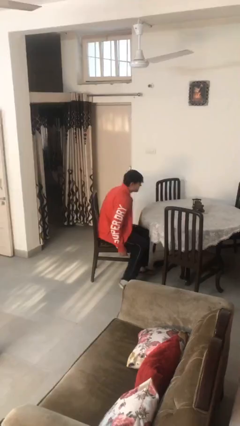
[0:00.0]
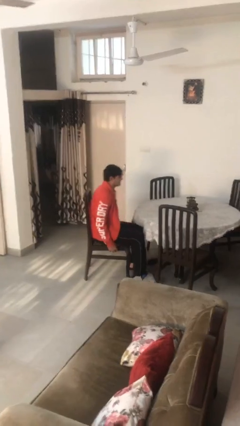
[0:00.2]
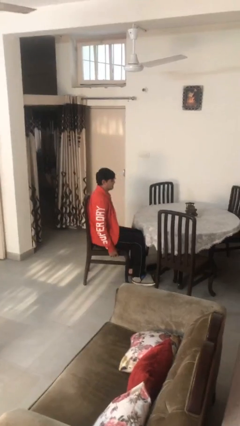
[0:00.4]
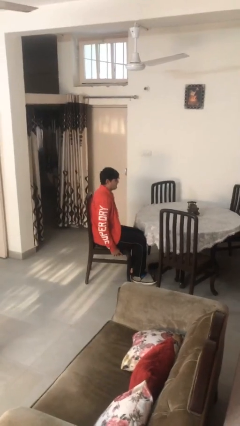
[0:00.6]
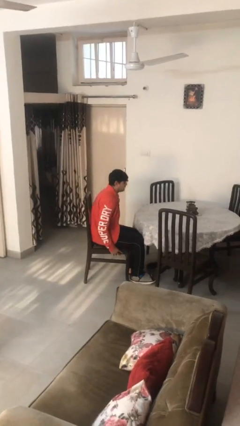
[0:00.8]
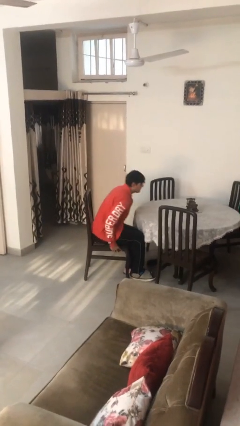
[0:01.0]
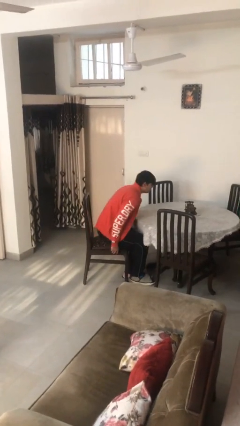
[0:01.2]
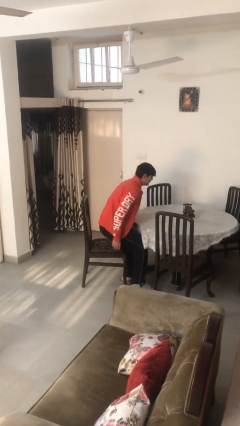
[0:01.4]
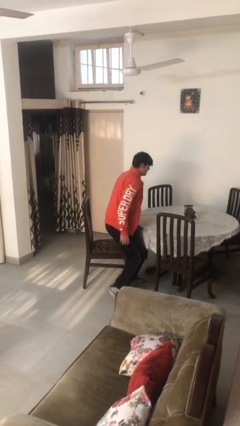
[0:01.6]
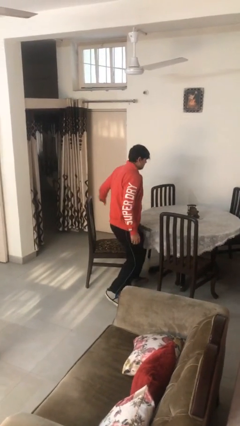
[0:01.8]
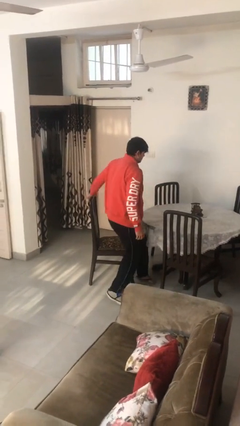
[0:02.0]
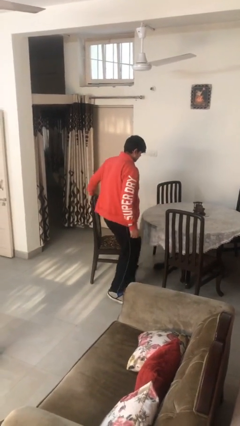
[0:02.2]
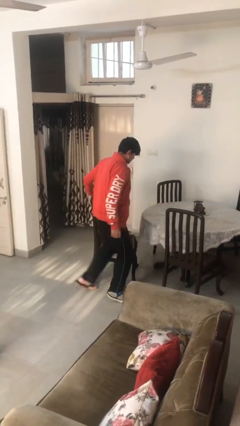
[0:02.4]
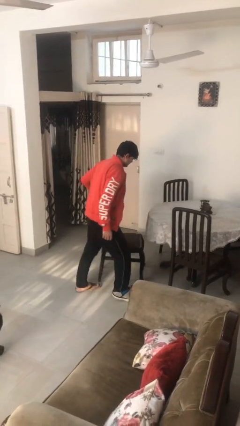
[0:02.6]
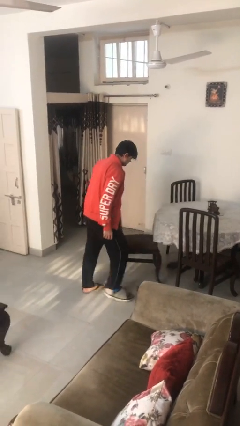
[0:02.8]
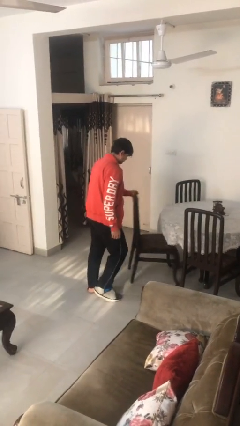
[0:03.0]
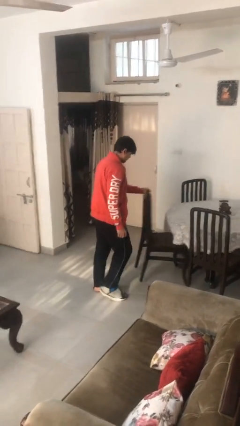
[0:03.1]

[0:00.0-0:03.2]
person stands up

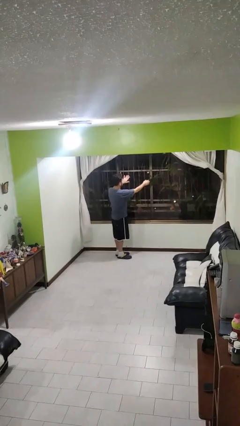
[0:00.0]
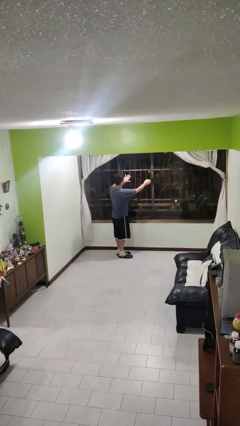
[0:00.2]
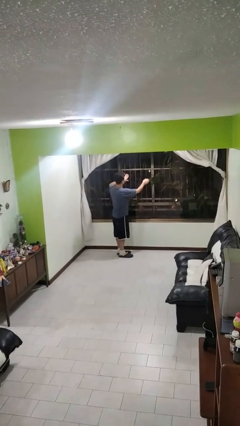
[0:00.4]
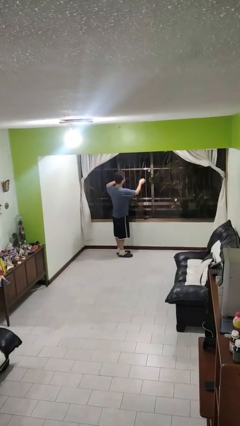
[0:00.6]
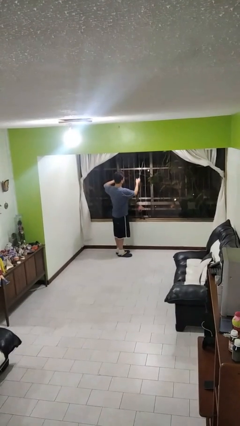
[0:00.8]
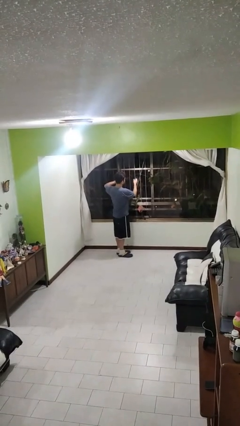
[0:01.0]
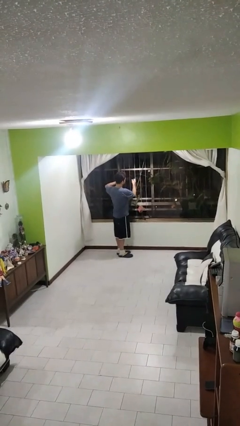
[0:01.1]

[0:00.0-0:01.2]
person opens home window

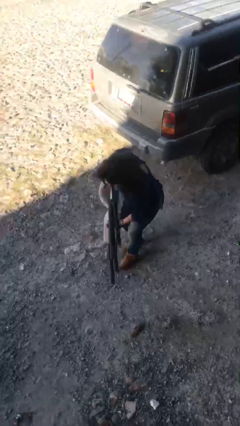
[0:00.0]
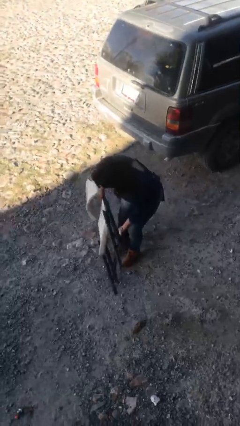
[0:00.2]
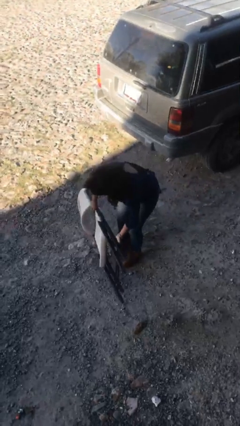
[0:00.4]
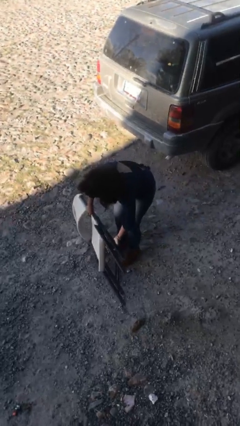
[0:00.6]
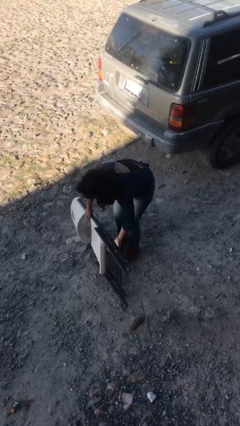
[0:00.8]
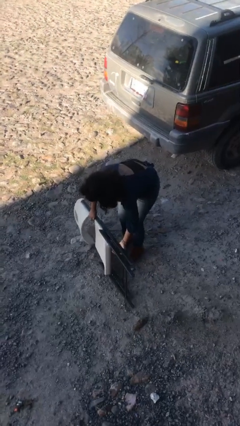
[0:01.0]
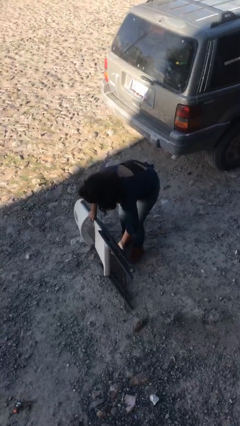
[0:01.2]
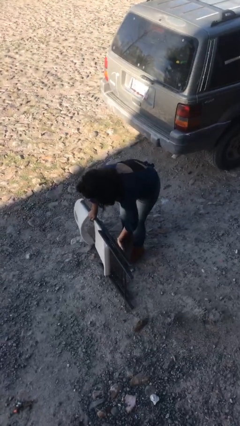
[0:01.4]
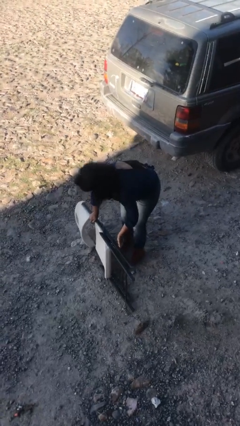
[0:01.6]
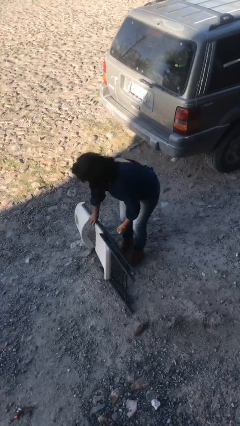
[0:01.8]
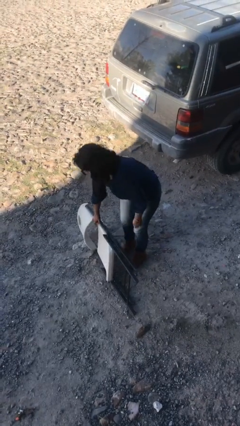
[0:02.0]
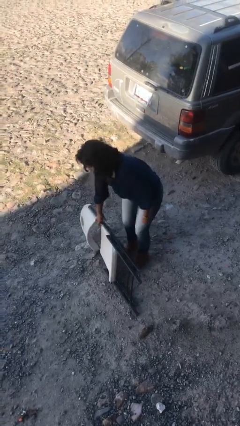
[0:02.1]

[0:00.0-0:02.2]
person puts down object on floor

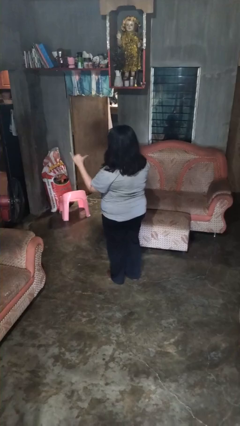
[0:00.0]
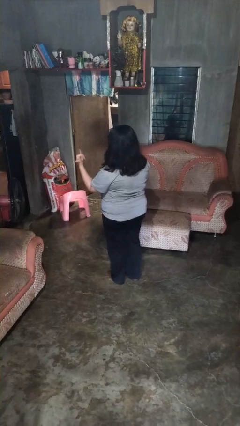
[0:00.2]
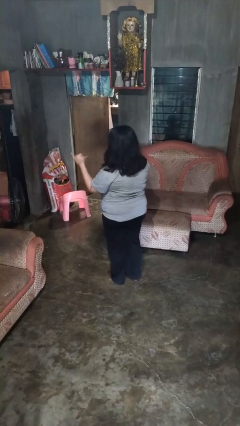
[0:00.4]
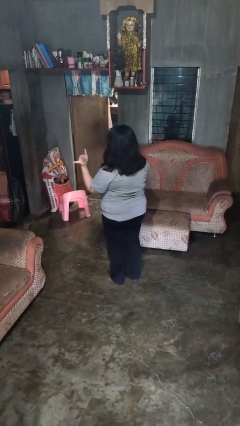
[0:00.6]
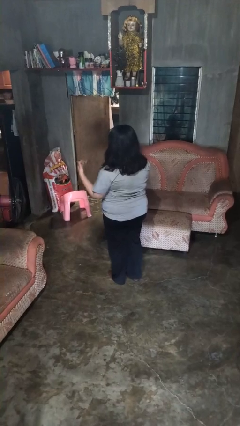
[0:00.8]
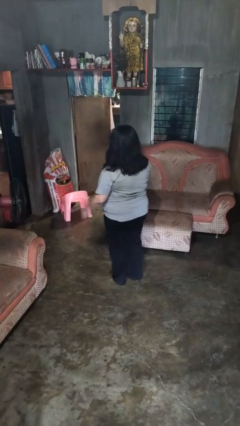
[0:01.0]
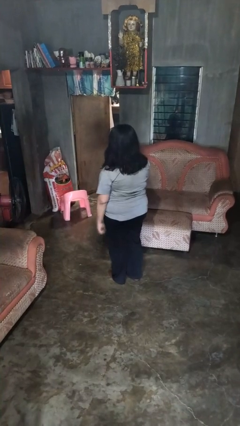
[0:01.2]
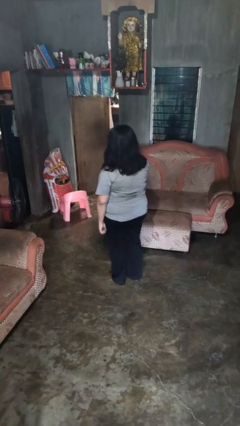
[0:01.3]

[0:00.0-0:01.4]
person gestures hang loose

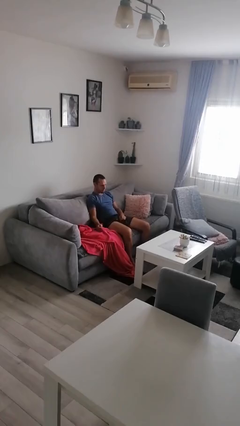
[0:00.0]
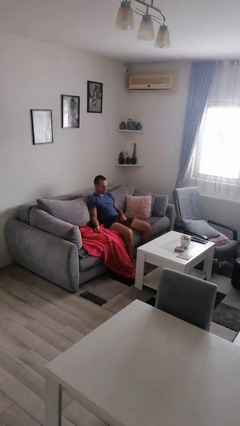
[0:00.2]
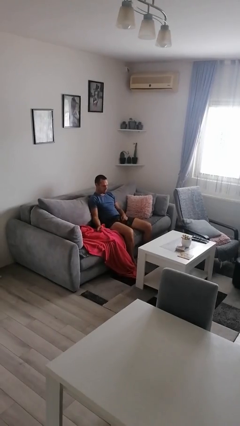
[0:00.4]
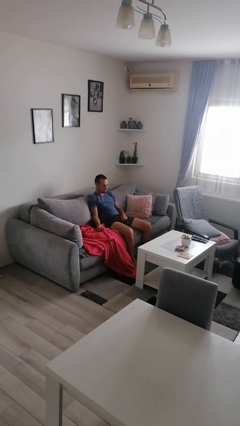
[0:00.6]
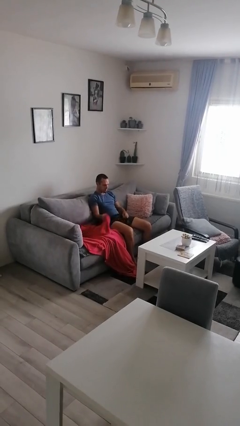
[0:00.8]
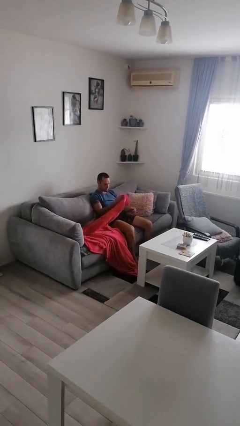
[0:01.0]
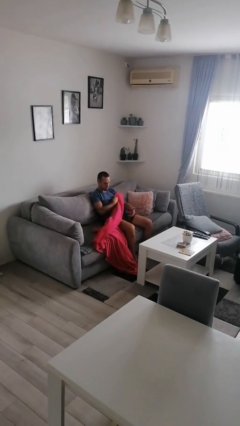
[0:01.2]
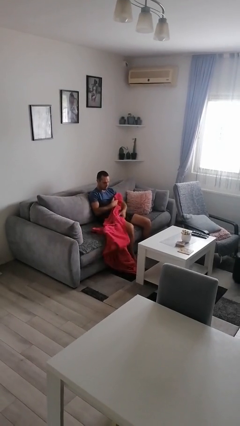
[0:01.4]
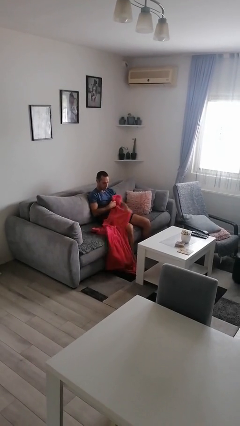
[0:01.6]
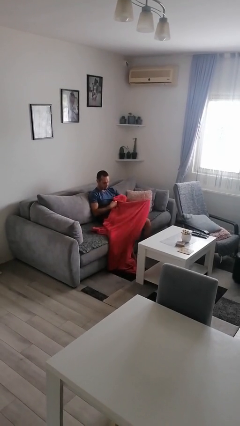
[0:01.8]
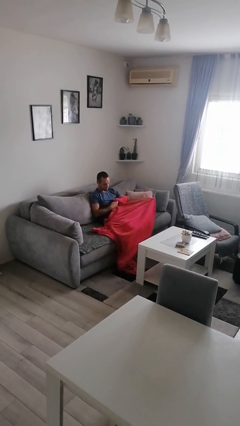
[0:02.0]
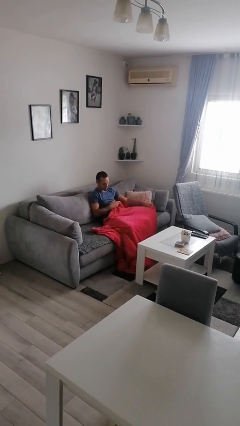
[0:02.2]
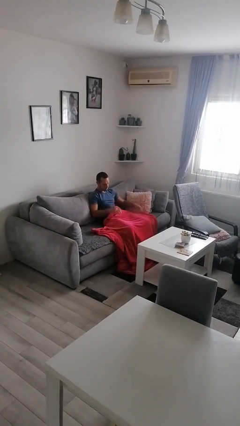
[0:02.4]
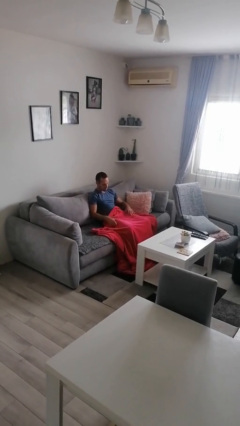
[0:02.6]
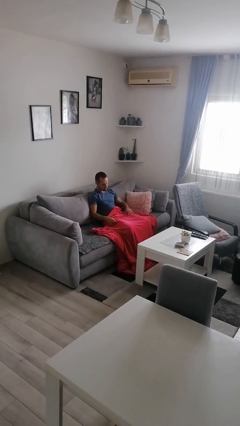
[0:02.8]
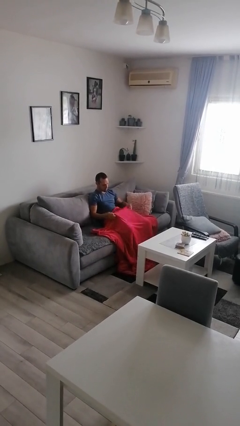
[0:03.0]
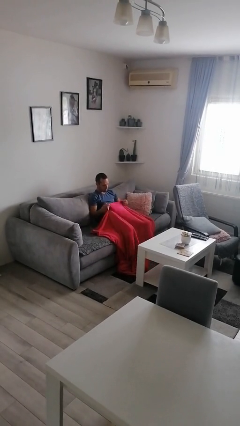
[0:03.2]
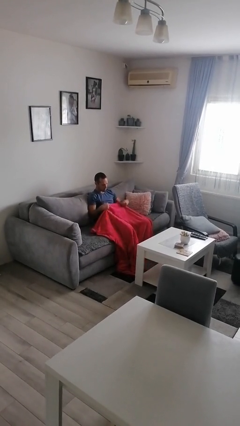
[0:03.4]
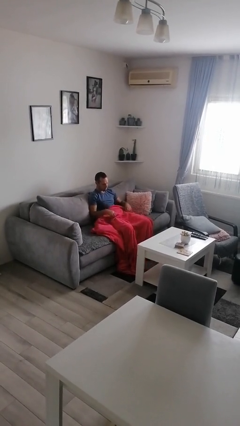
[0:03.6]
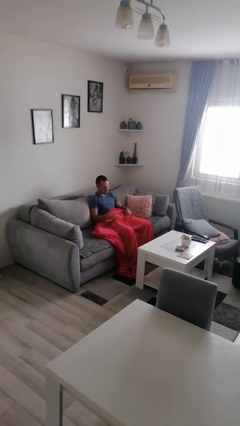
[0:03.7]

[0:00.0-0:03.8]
person covers with blanket

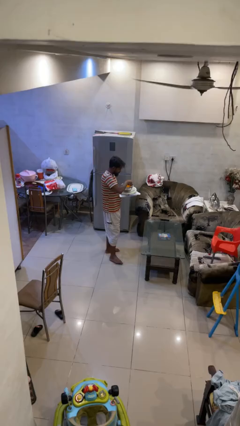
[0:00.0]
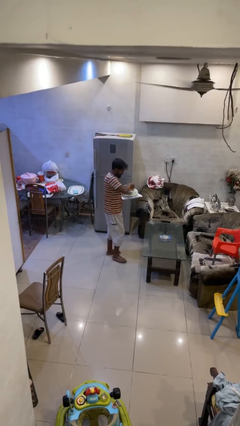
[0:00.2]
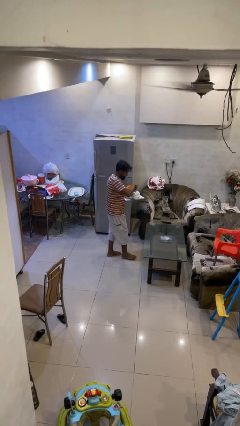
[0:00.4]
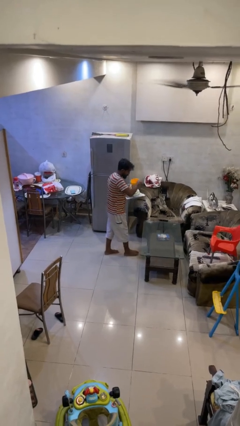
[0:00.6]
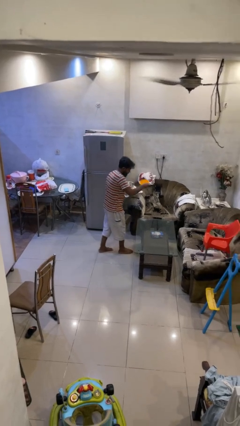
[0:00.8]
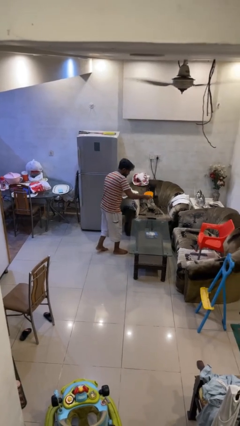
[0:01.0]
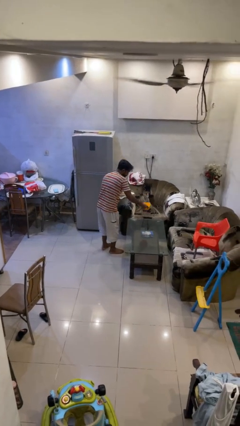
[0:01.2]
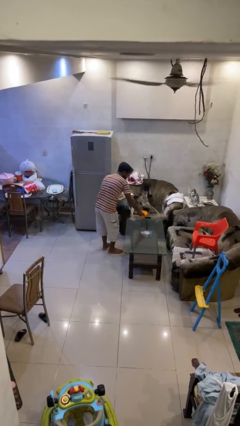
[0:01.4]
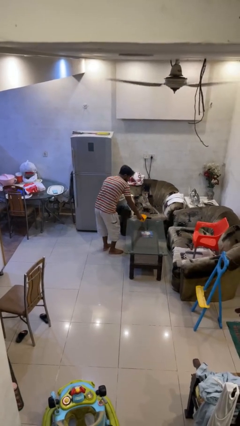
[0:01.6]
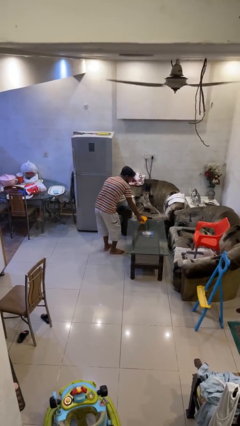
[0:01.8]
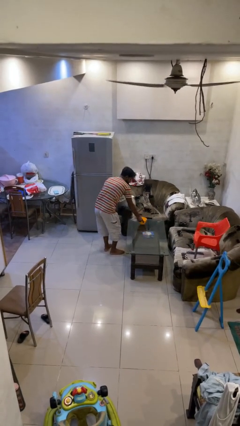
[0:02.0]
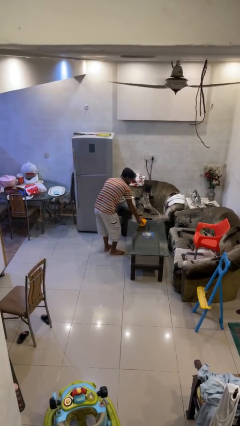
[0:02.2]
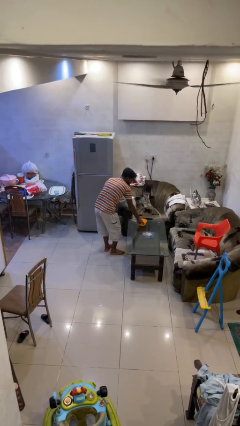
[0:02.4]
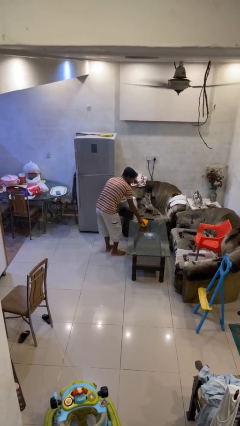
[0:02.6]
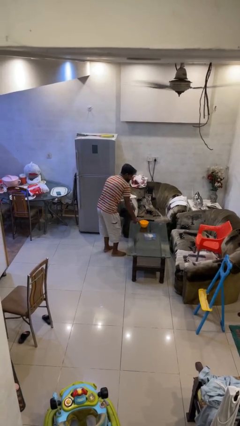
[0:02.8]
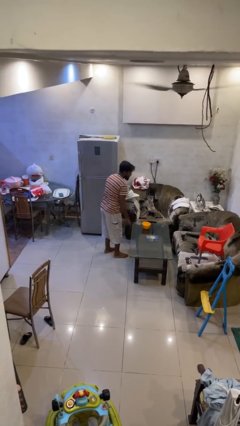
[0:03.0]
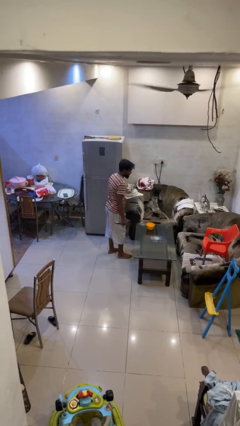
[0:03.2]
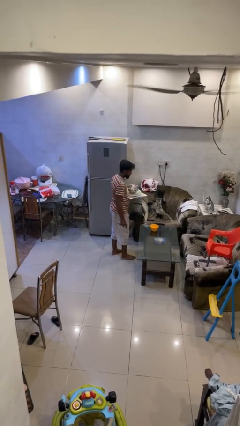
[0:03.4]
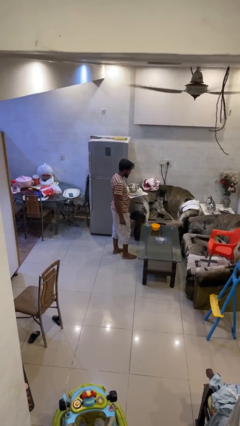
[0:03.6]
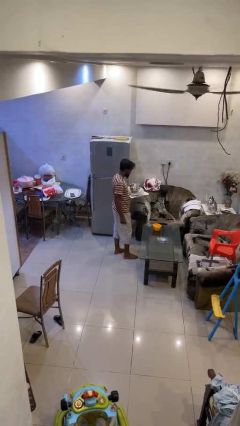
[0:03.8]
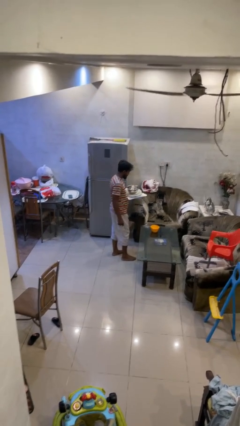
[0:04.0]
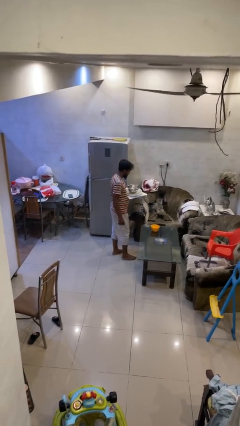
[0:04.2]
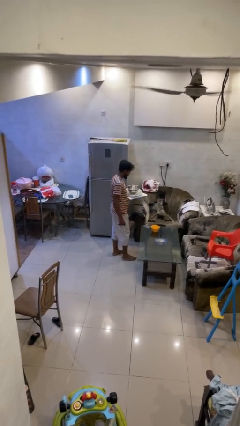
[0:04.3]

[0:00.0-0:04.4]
person sets table

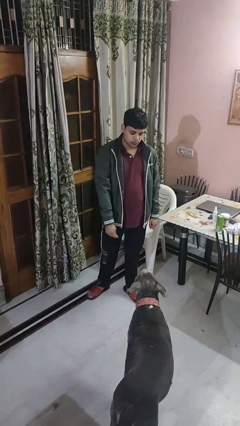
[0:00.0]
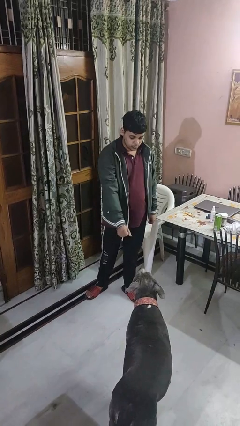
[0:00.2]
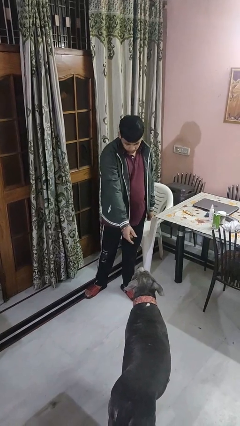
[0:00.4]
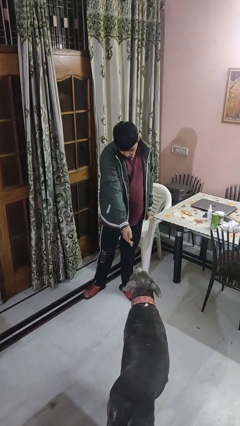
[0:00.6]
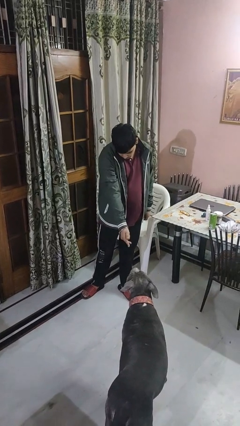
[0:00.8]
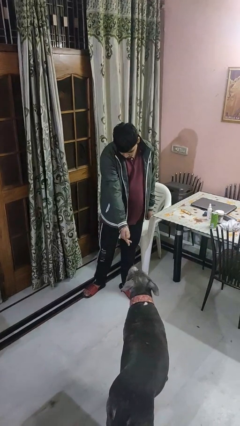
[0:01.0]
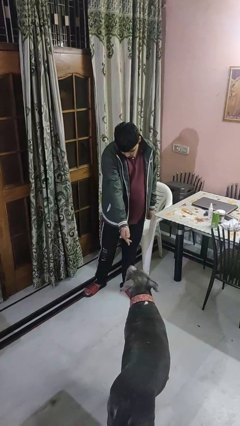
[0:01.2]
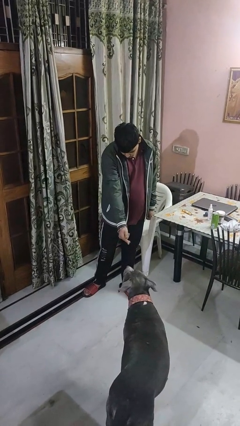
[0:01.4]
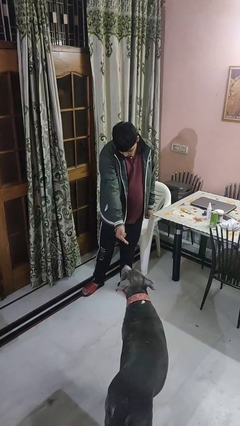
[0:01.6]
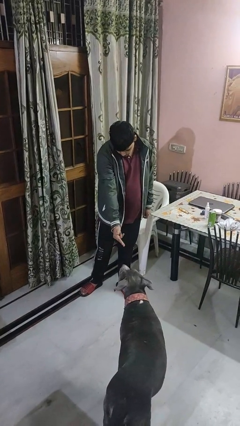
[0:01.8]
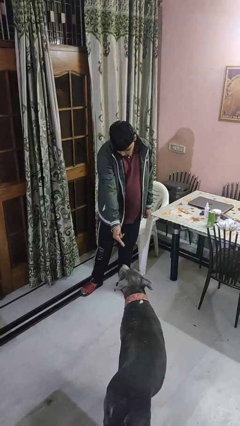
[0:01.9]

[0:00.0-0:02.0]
person points to dog
